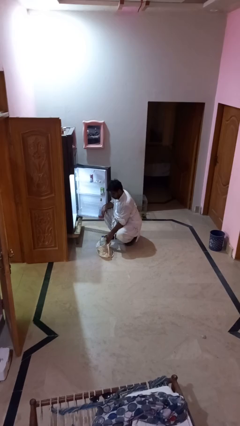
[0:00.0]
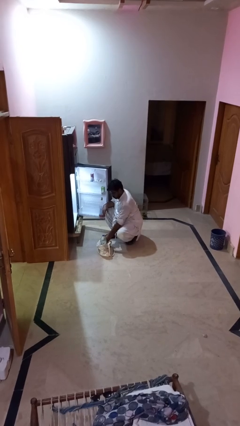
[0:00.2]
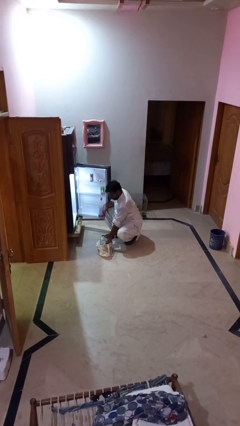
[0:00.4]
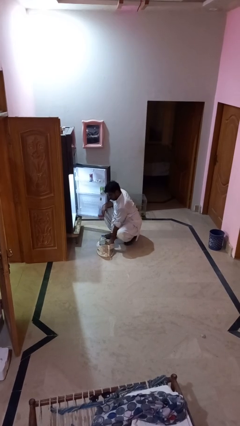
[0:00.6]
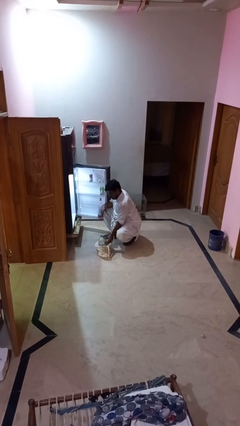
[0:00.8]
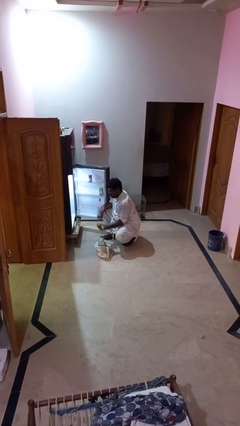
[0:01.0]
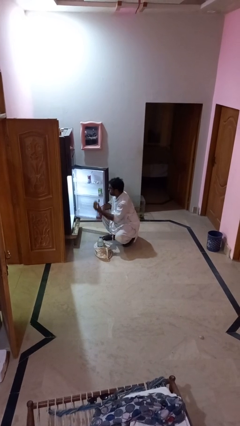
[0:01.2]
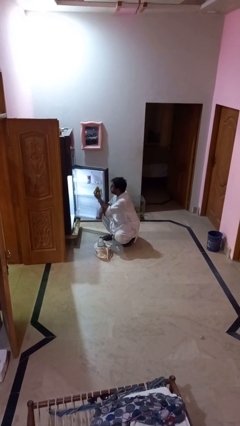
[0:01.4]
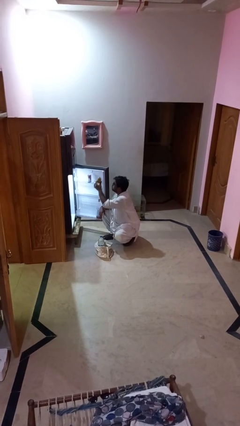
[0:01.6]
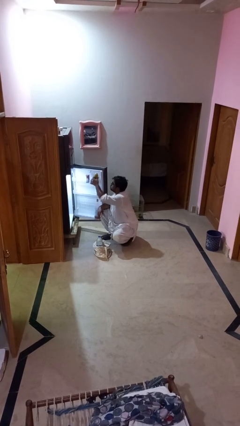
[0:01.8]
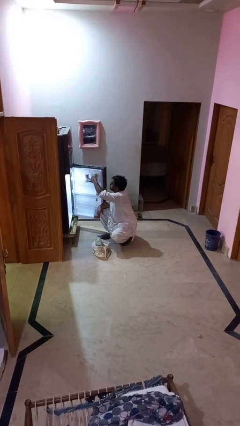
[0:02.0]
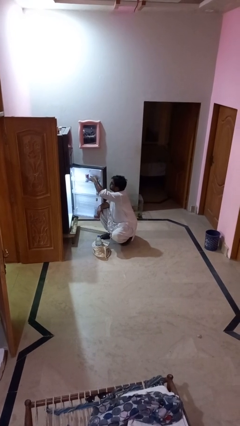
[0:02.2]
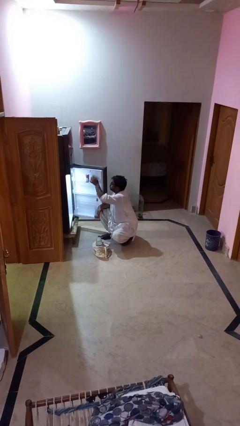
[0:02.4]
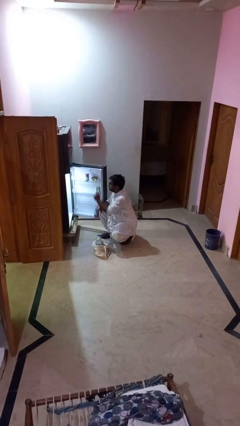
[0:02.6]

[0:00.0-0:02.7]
person loads groceries into refrigerator

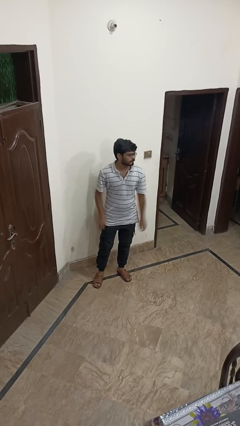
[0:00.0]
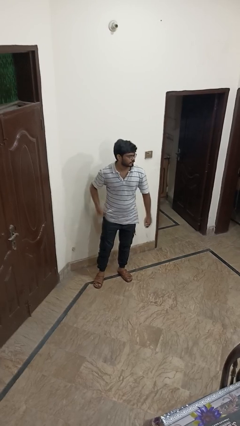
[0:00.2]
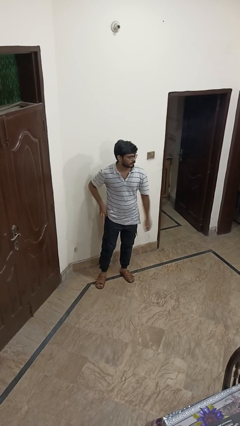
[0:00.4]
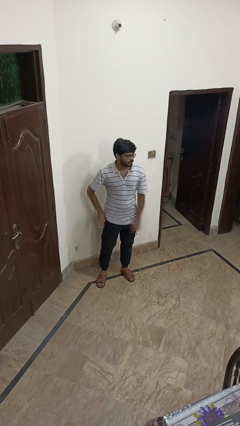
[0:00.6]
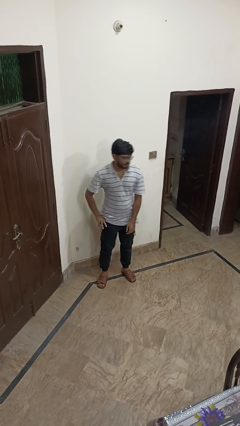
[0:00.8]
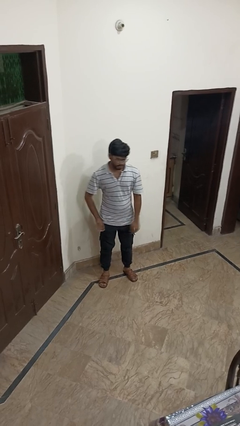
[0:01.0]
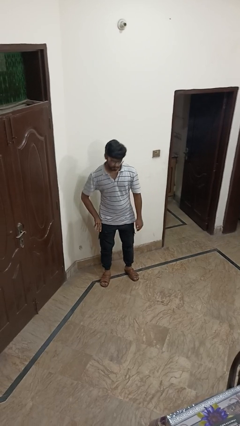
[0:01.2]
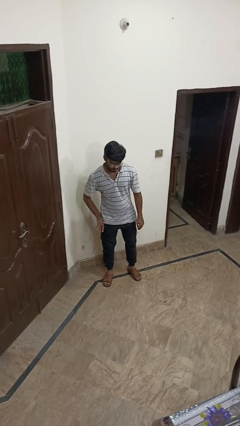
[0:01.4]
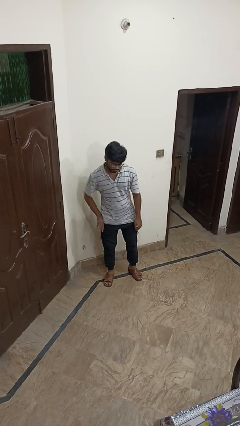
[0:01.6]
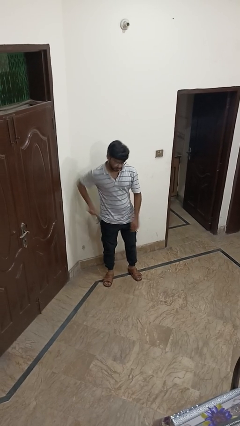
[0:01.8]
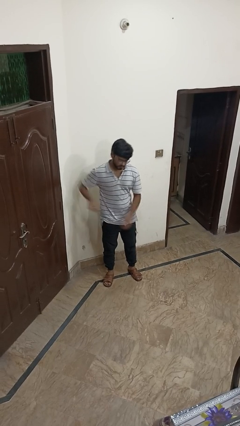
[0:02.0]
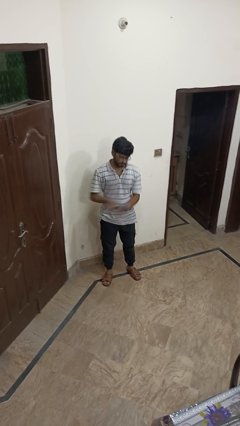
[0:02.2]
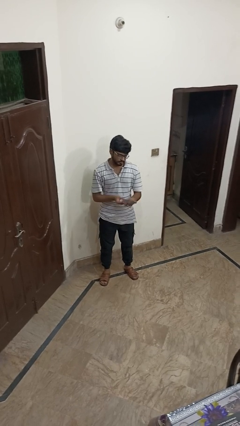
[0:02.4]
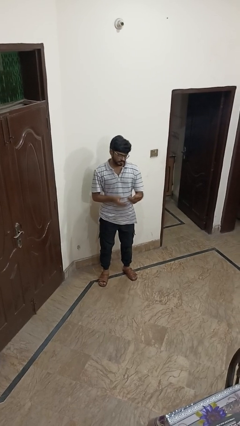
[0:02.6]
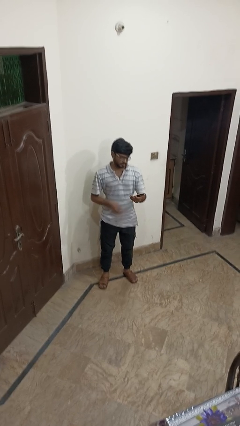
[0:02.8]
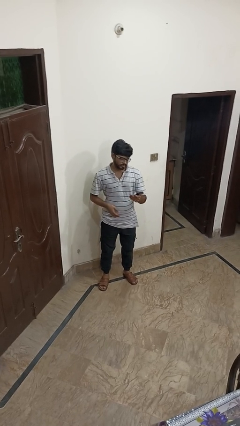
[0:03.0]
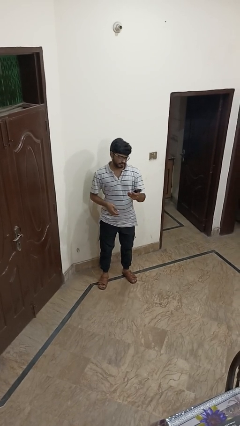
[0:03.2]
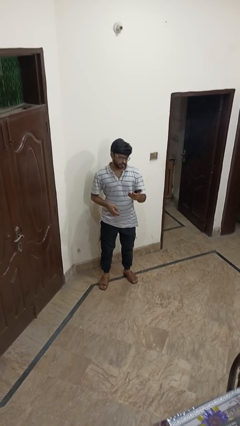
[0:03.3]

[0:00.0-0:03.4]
person takes phone from pocket

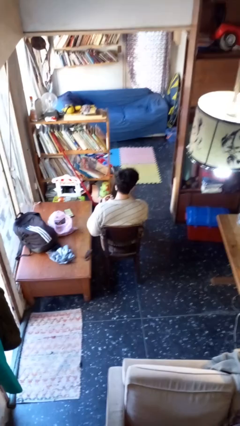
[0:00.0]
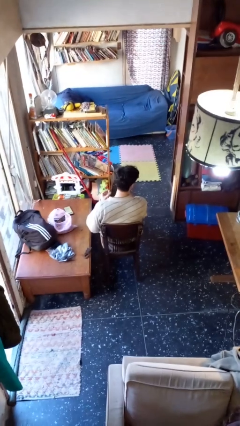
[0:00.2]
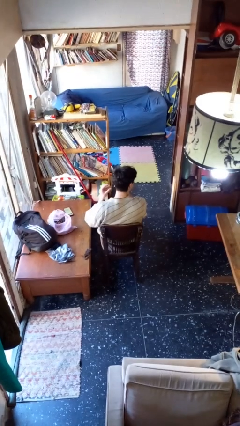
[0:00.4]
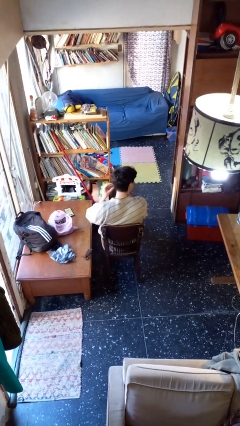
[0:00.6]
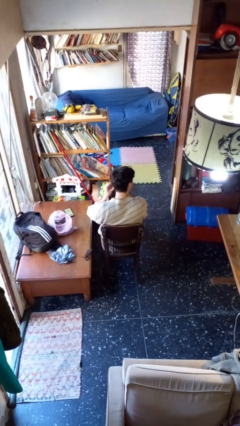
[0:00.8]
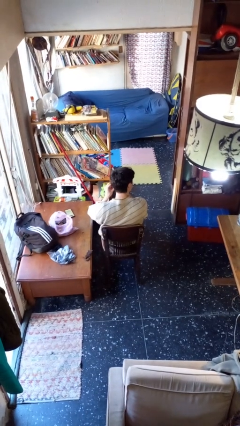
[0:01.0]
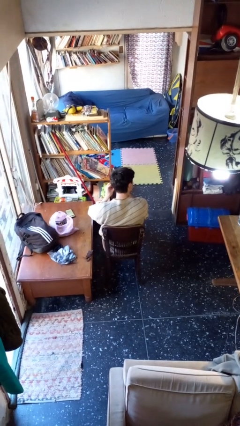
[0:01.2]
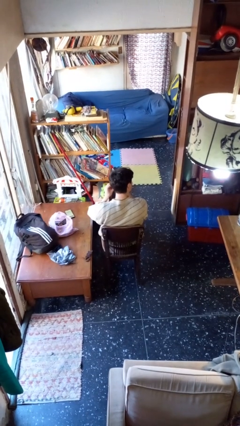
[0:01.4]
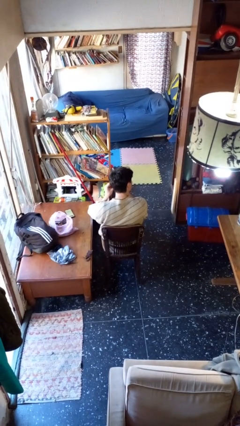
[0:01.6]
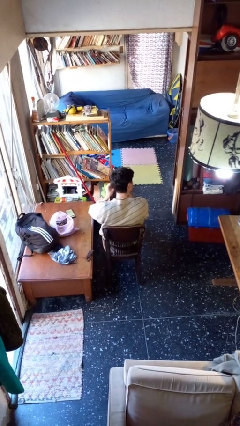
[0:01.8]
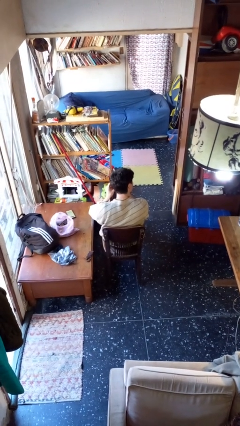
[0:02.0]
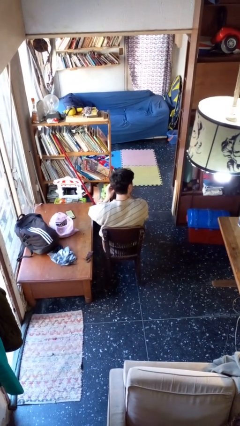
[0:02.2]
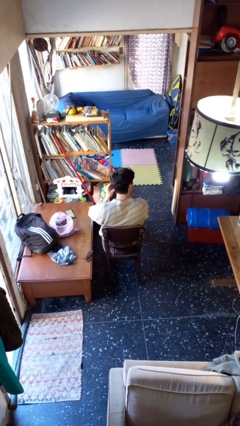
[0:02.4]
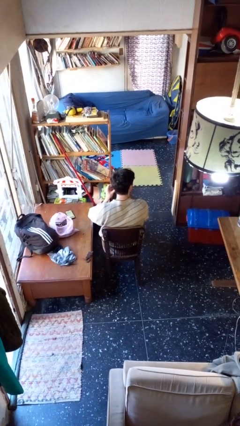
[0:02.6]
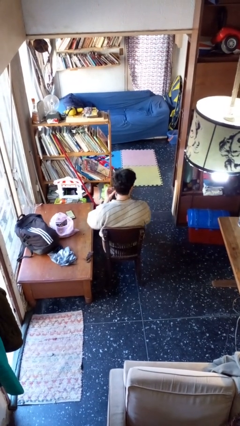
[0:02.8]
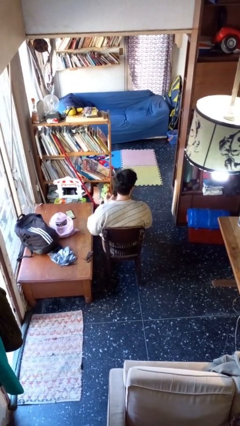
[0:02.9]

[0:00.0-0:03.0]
person puts on earrings

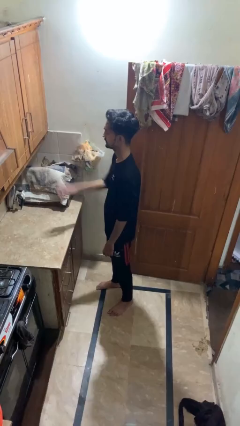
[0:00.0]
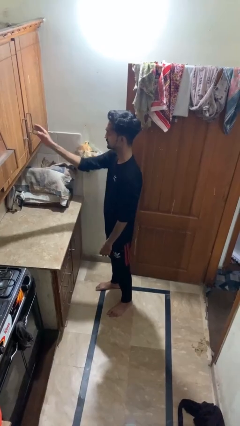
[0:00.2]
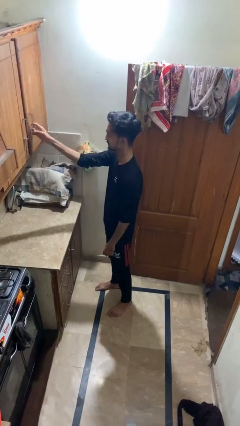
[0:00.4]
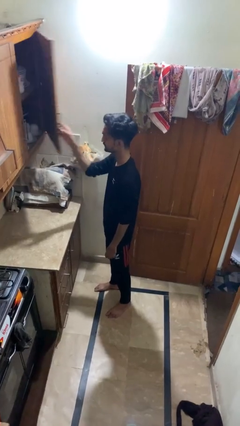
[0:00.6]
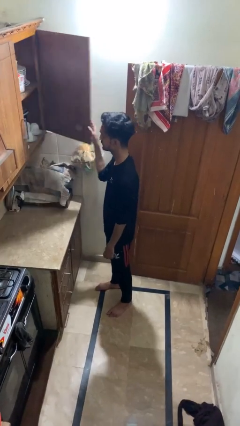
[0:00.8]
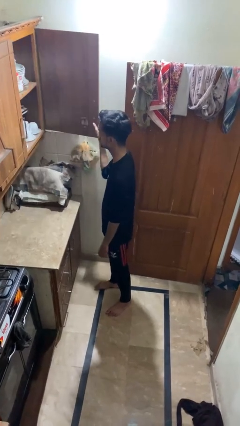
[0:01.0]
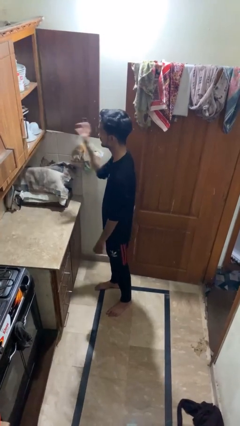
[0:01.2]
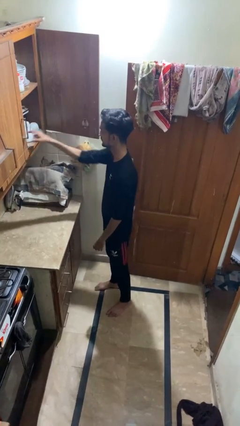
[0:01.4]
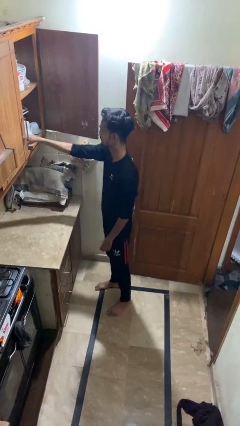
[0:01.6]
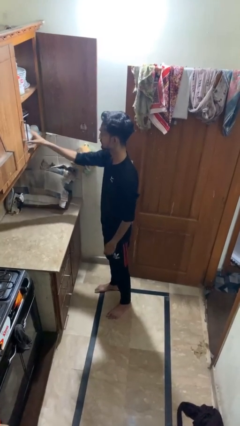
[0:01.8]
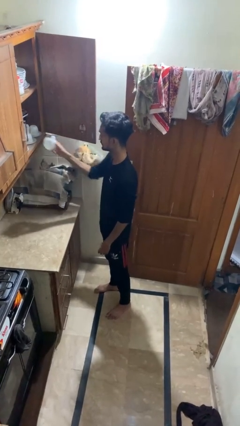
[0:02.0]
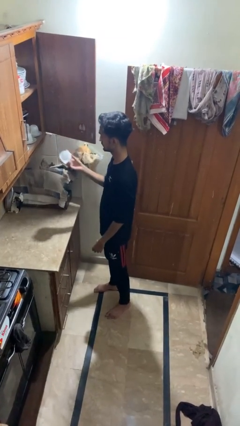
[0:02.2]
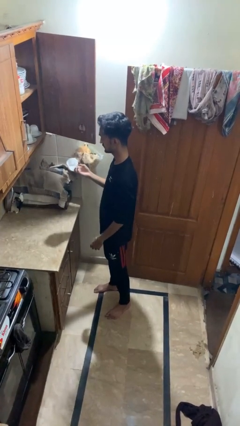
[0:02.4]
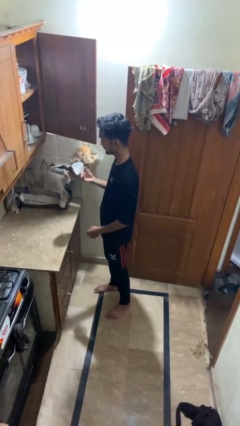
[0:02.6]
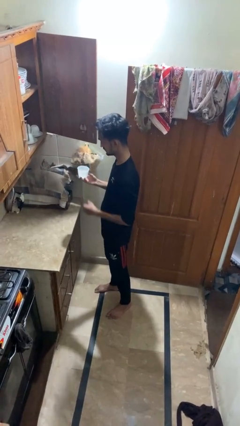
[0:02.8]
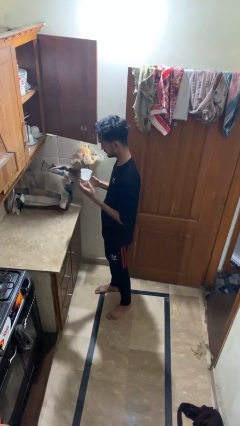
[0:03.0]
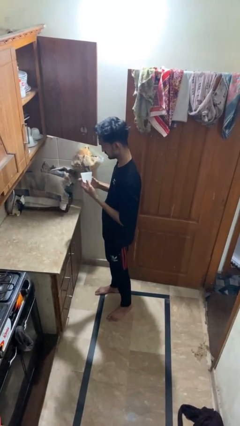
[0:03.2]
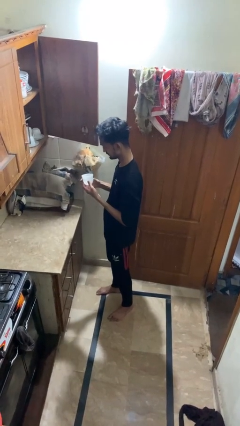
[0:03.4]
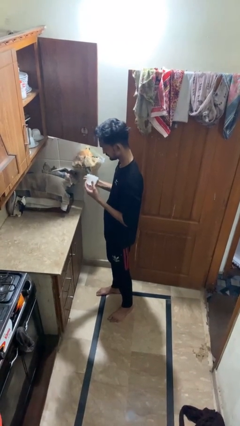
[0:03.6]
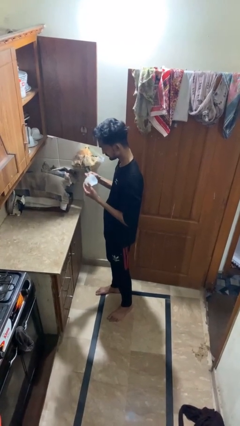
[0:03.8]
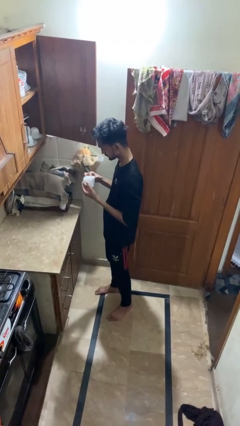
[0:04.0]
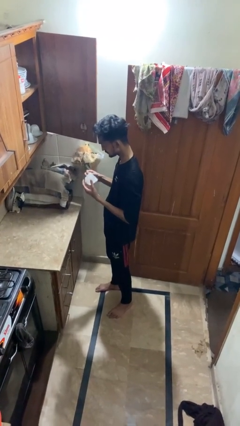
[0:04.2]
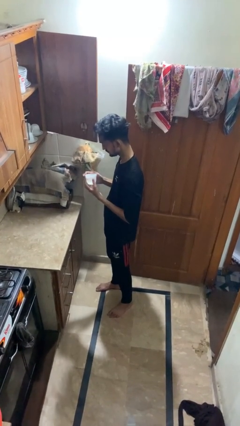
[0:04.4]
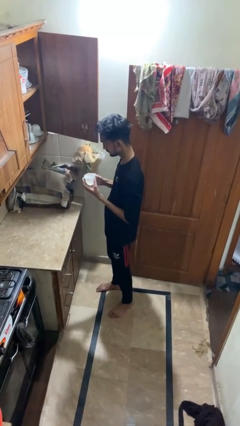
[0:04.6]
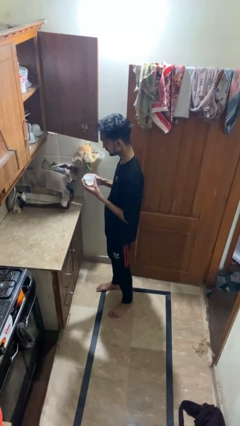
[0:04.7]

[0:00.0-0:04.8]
person puts object in cabinet

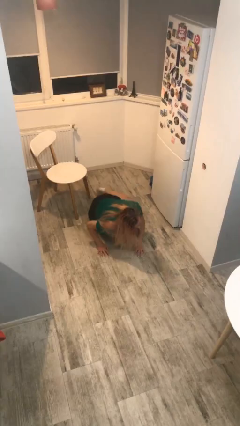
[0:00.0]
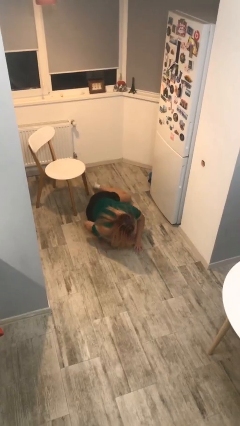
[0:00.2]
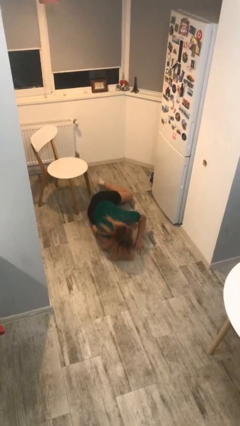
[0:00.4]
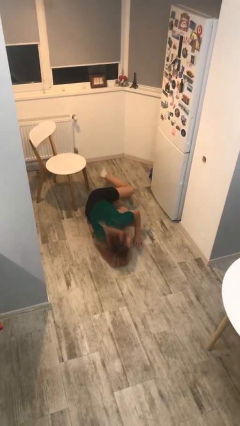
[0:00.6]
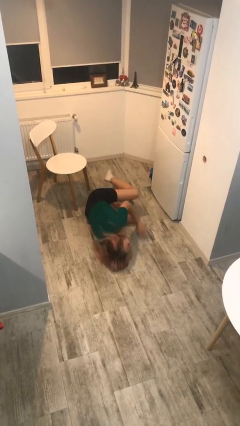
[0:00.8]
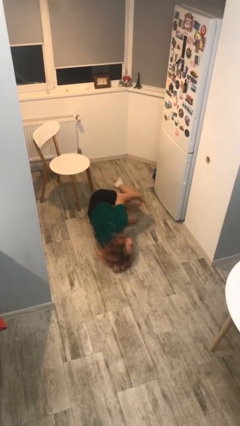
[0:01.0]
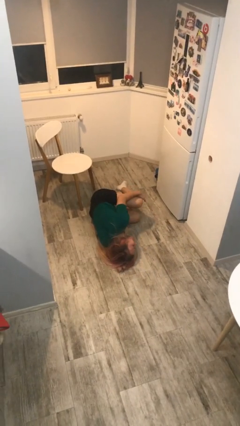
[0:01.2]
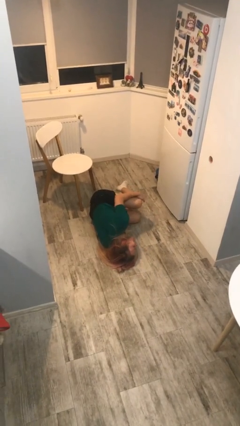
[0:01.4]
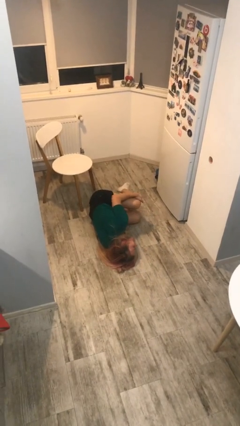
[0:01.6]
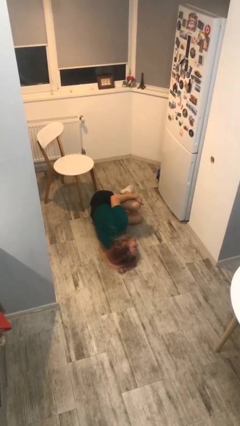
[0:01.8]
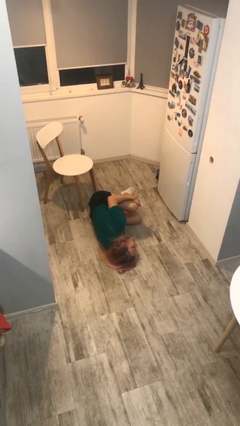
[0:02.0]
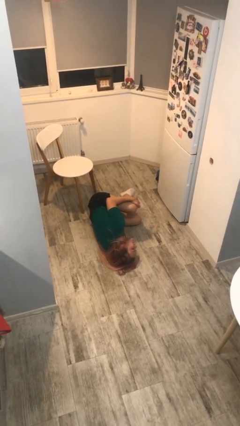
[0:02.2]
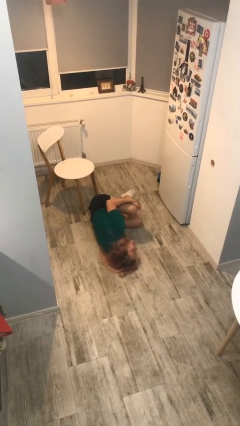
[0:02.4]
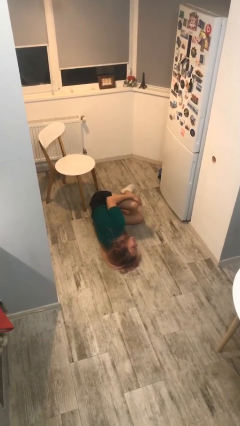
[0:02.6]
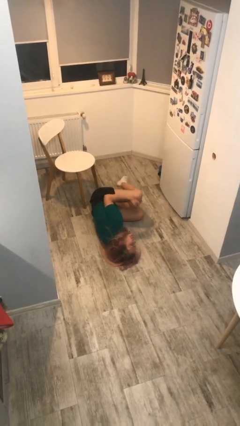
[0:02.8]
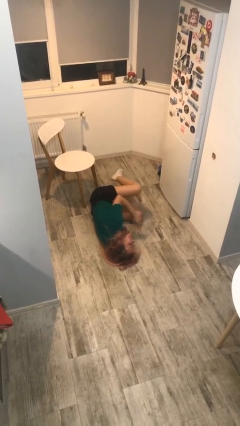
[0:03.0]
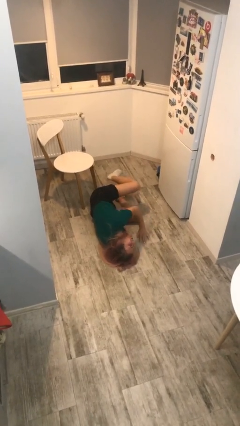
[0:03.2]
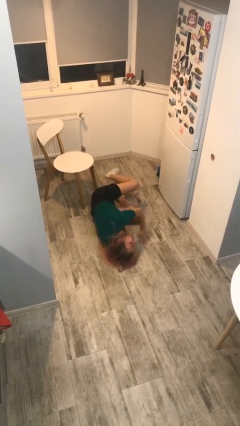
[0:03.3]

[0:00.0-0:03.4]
person lies down on floor

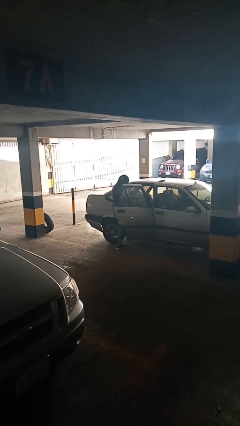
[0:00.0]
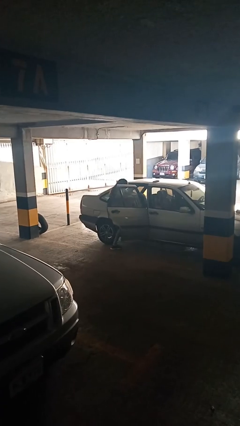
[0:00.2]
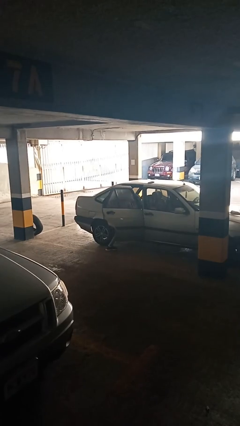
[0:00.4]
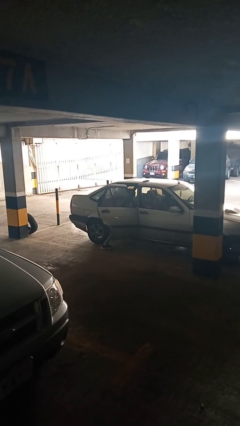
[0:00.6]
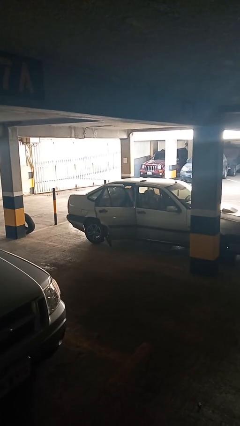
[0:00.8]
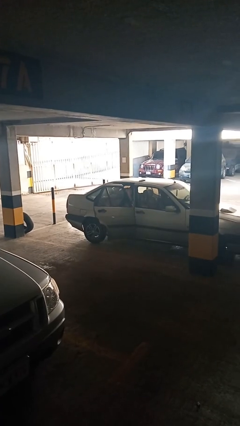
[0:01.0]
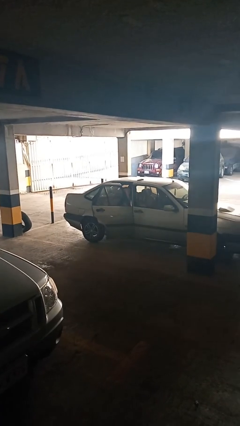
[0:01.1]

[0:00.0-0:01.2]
person enters car
